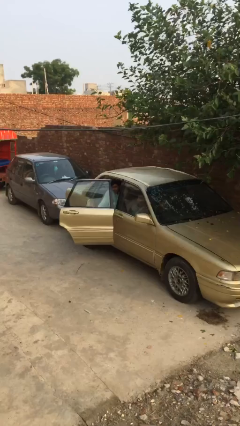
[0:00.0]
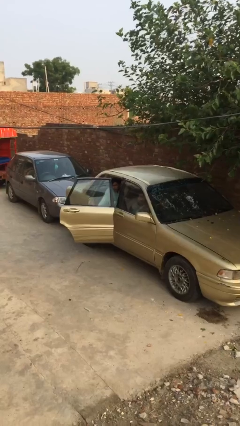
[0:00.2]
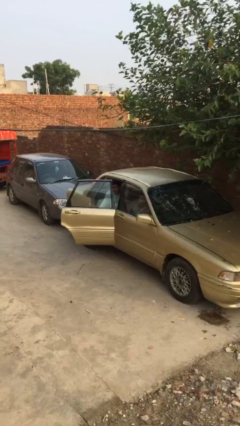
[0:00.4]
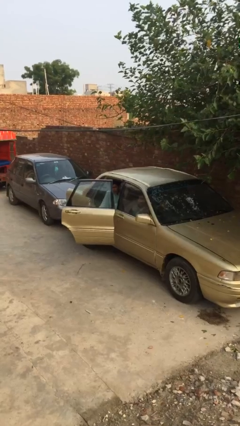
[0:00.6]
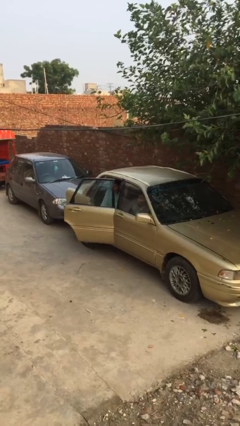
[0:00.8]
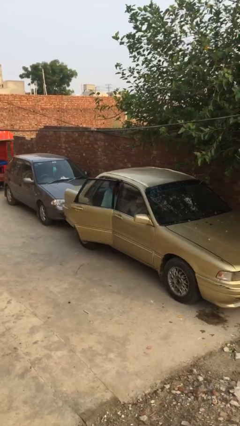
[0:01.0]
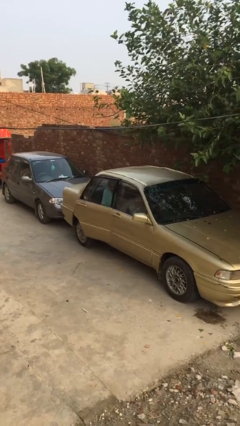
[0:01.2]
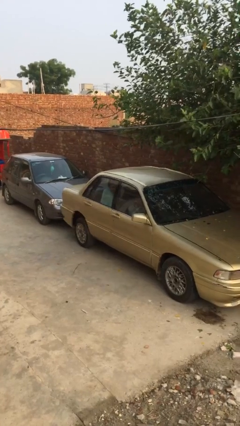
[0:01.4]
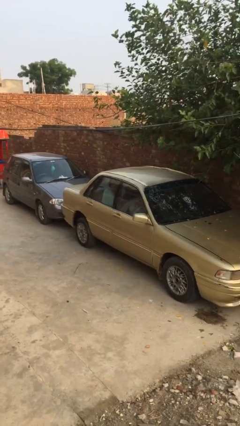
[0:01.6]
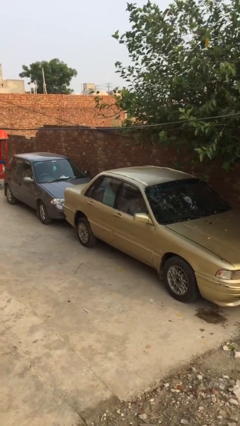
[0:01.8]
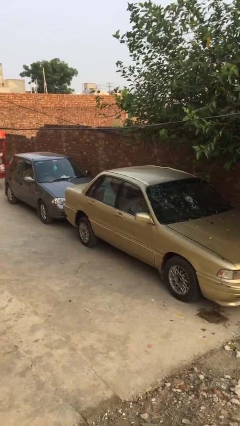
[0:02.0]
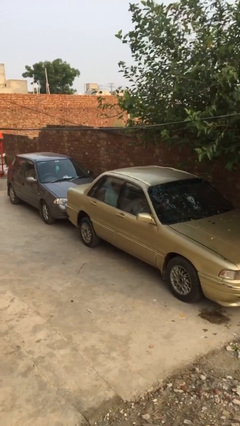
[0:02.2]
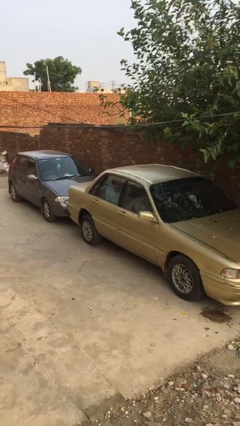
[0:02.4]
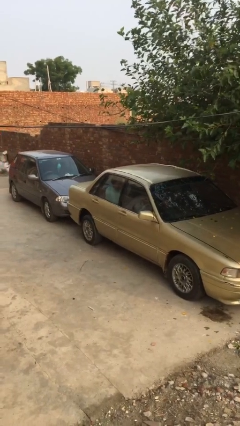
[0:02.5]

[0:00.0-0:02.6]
person closes car door

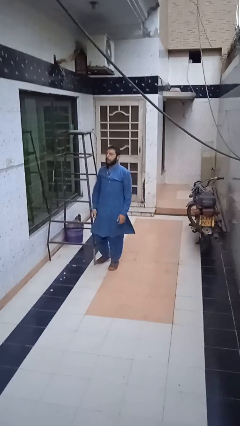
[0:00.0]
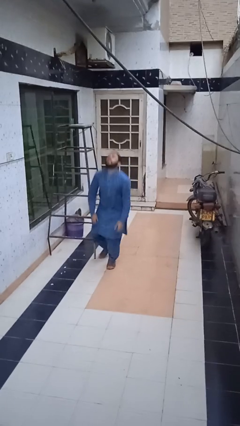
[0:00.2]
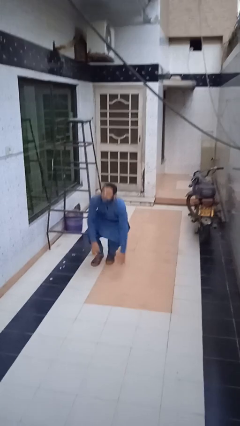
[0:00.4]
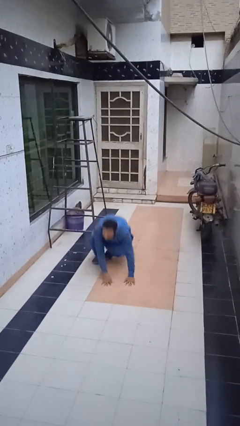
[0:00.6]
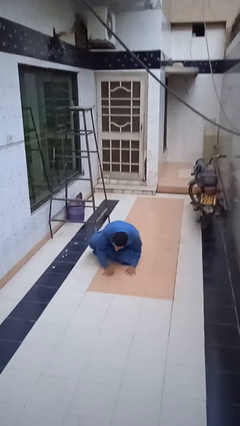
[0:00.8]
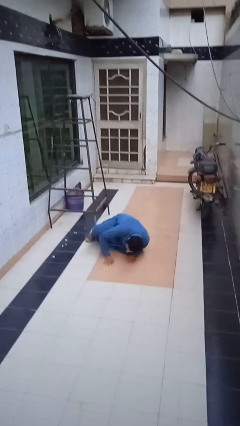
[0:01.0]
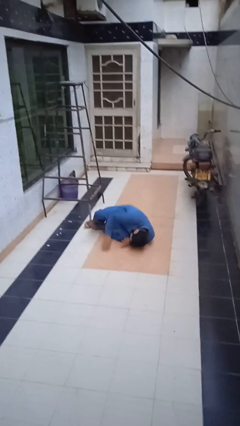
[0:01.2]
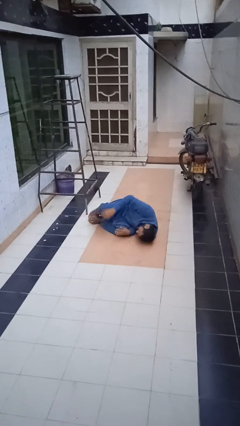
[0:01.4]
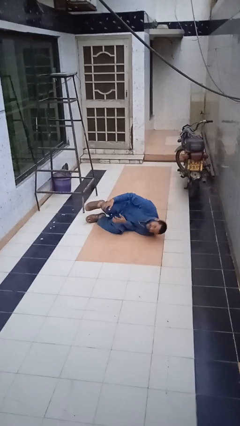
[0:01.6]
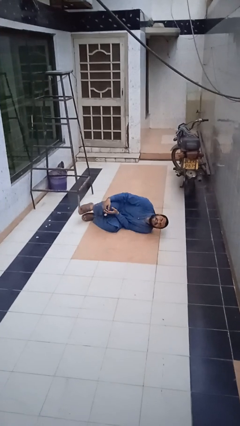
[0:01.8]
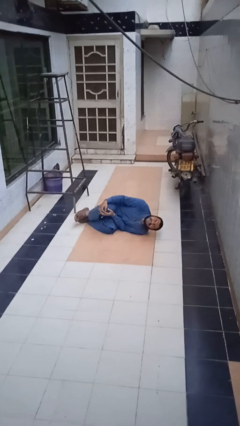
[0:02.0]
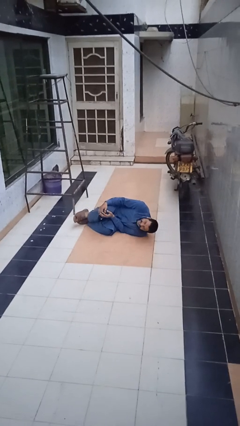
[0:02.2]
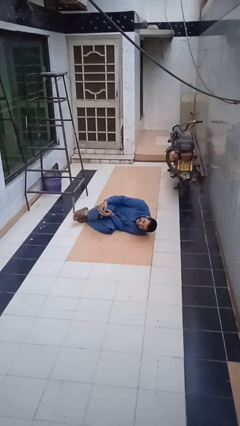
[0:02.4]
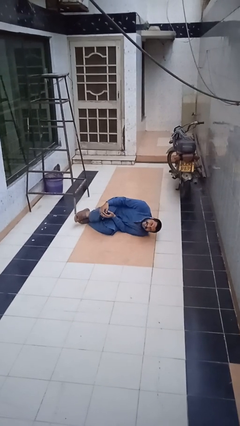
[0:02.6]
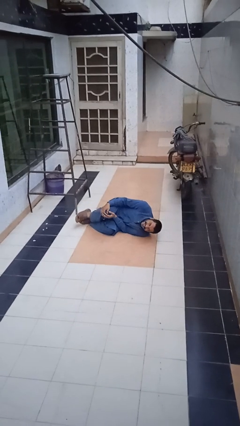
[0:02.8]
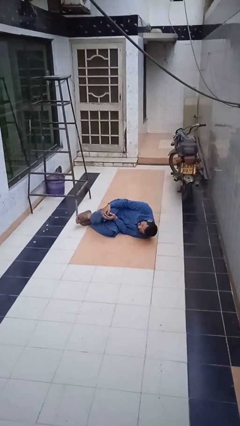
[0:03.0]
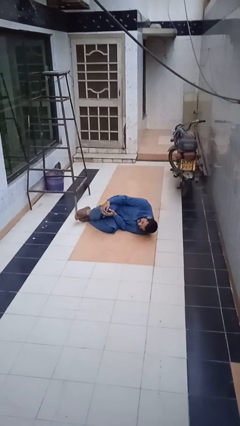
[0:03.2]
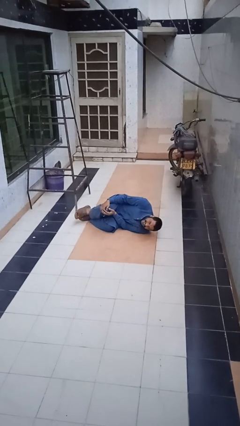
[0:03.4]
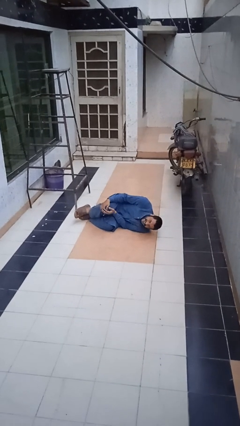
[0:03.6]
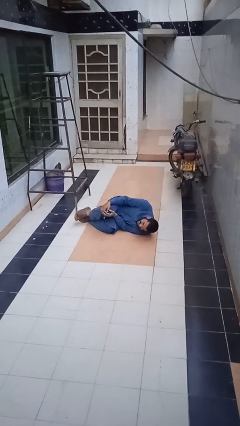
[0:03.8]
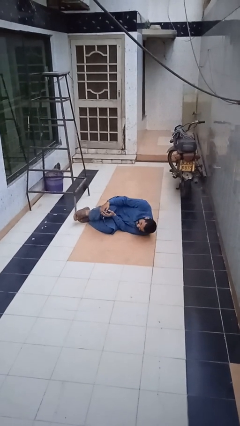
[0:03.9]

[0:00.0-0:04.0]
person lies down on floor

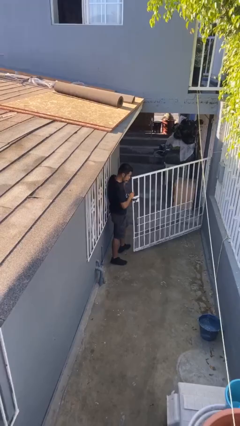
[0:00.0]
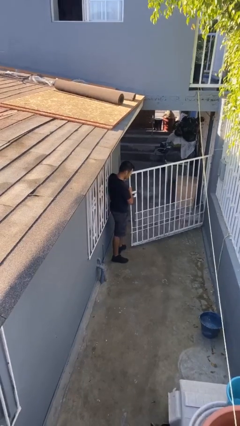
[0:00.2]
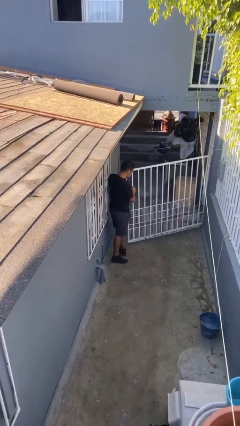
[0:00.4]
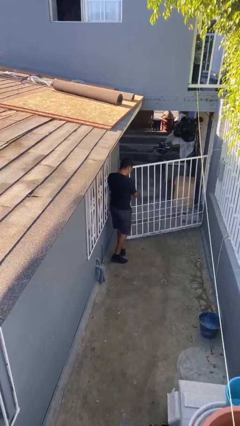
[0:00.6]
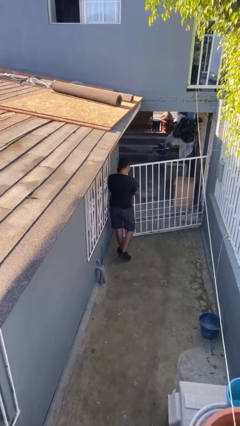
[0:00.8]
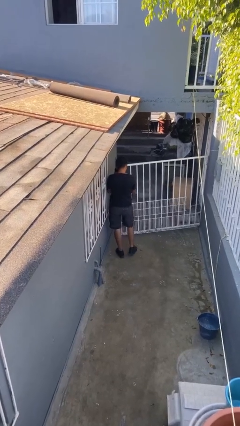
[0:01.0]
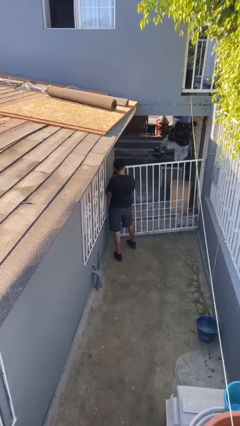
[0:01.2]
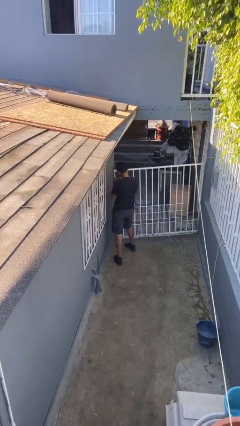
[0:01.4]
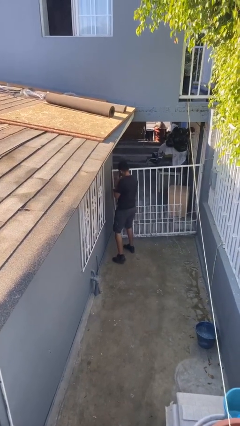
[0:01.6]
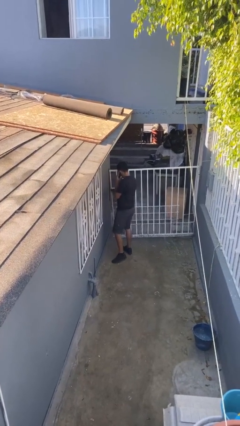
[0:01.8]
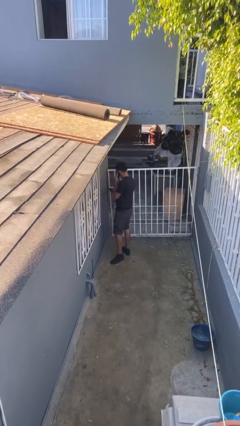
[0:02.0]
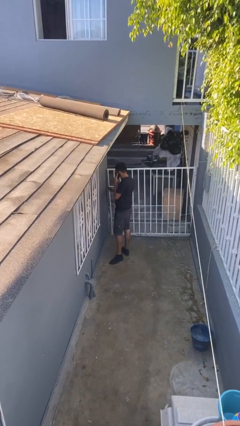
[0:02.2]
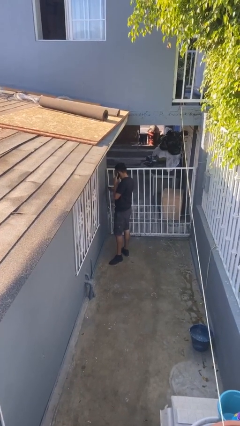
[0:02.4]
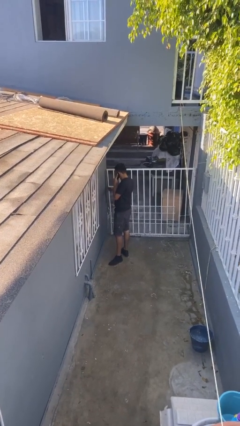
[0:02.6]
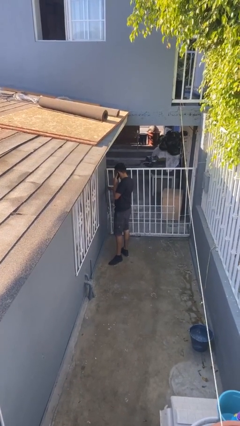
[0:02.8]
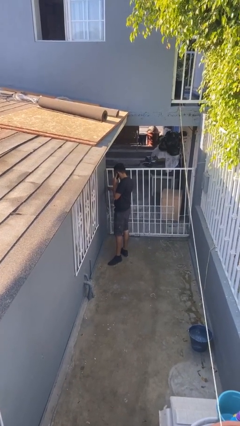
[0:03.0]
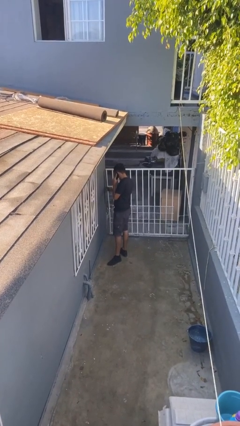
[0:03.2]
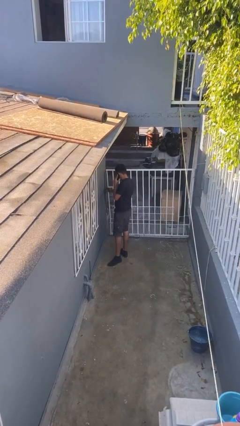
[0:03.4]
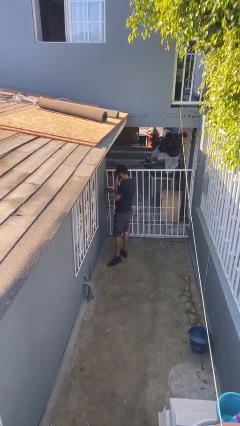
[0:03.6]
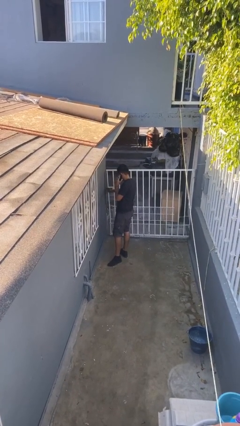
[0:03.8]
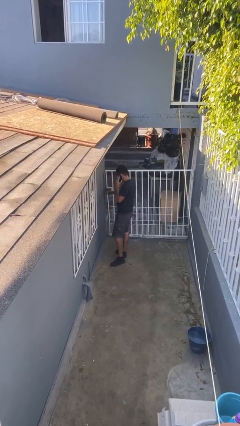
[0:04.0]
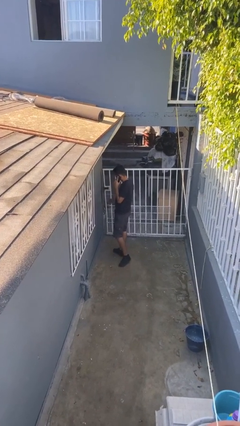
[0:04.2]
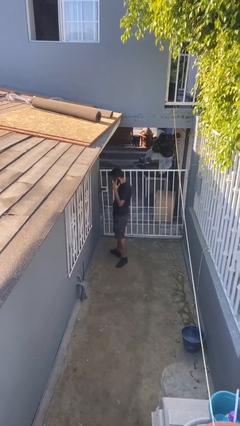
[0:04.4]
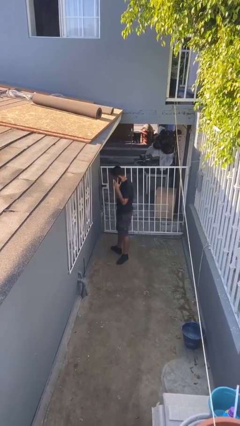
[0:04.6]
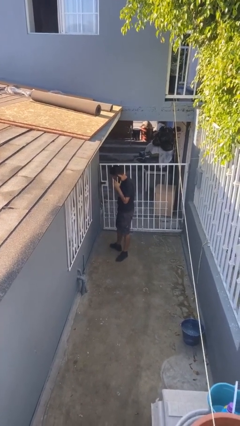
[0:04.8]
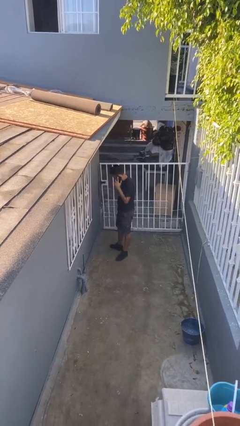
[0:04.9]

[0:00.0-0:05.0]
person closes facility door

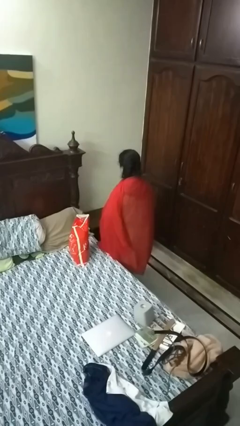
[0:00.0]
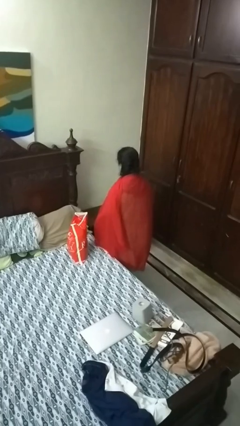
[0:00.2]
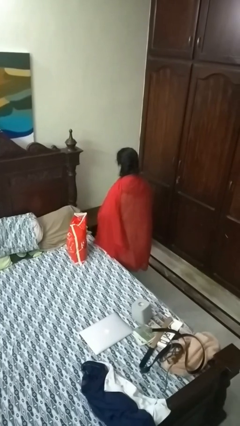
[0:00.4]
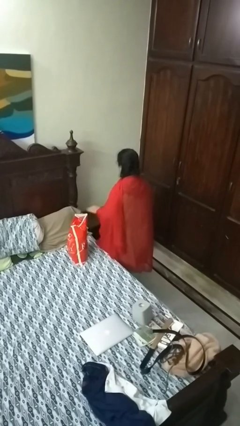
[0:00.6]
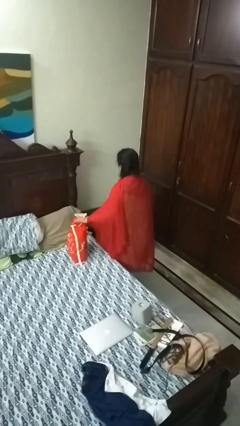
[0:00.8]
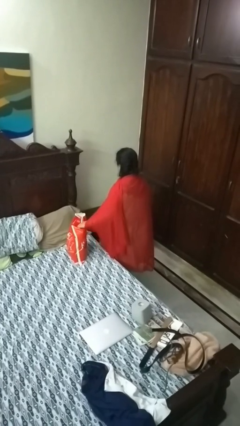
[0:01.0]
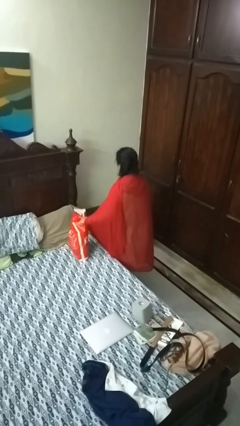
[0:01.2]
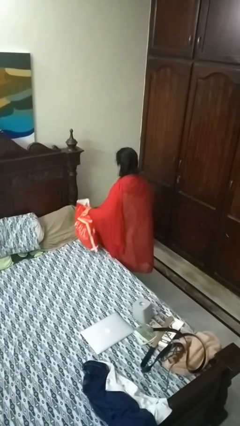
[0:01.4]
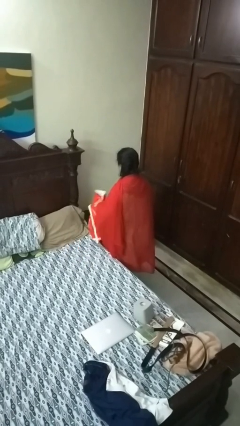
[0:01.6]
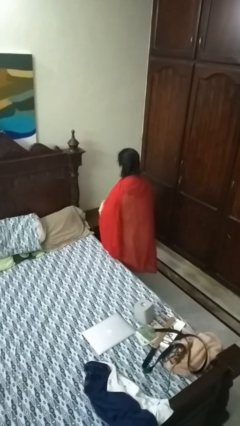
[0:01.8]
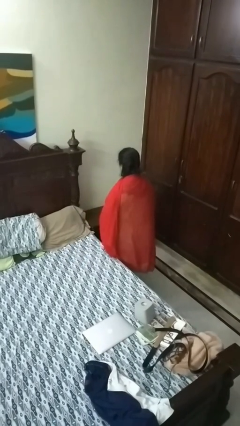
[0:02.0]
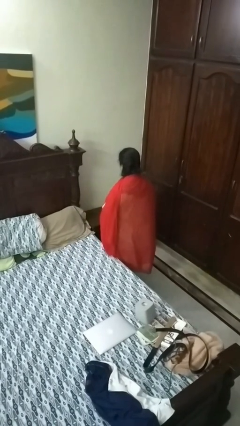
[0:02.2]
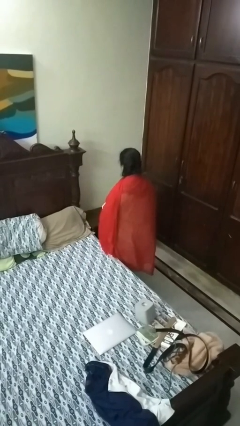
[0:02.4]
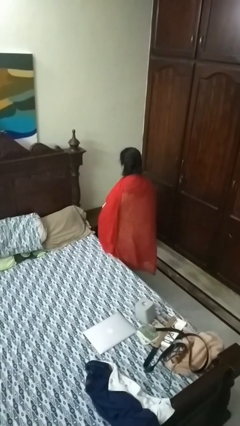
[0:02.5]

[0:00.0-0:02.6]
person picks up object from bed

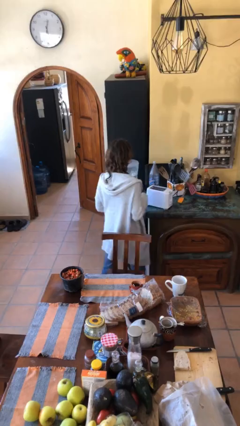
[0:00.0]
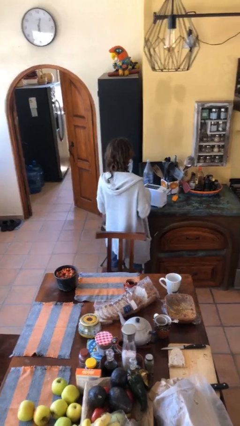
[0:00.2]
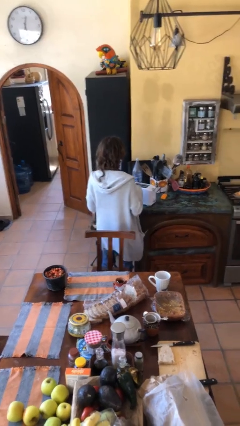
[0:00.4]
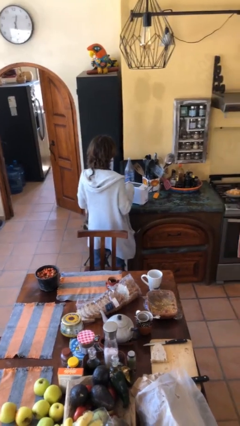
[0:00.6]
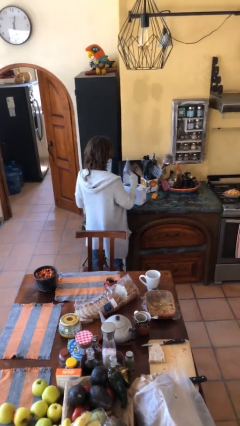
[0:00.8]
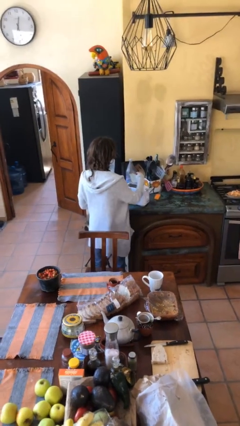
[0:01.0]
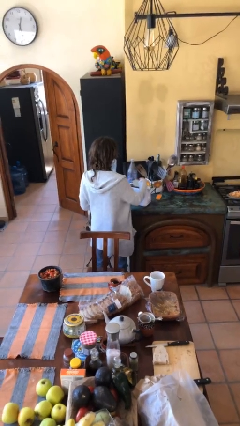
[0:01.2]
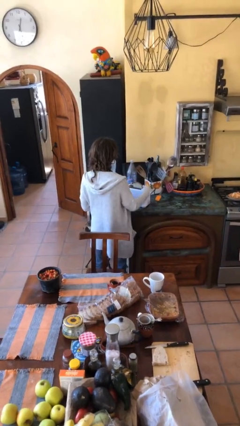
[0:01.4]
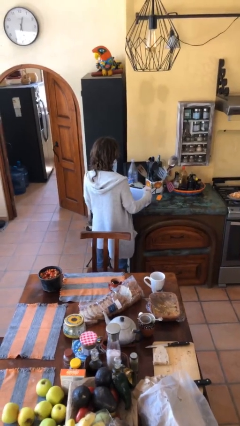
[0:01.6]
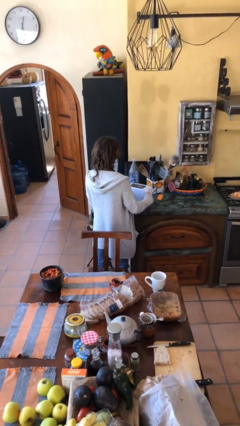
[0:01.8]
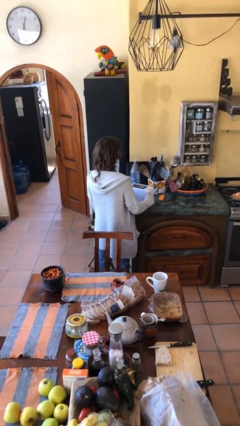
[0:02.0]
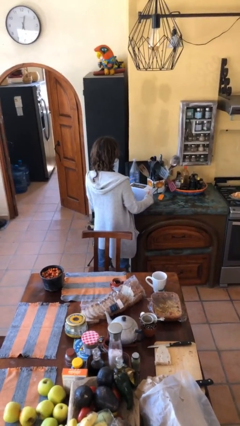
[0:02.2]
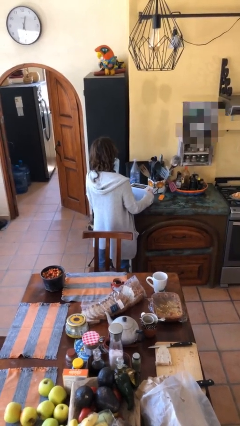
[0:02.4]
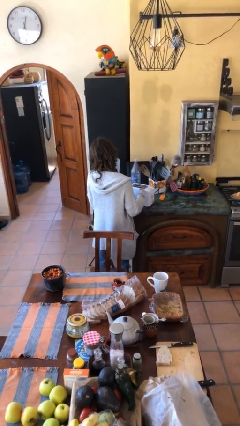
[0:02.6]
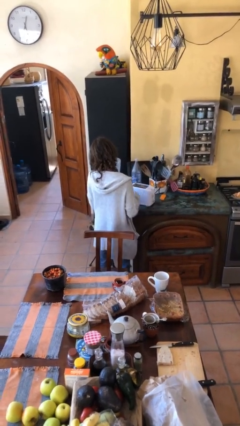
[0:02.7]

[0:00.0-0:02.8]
person puts object into toaster

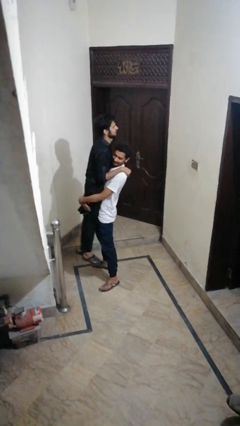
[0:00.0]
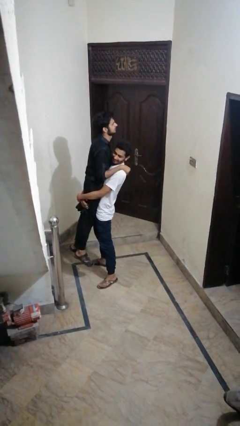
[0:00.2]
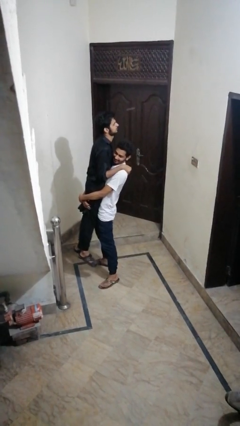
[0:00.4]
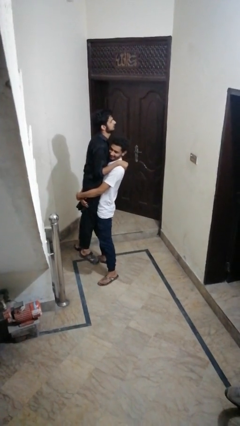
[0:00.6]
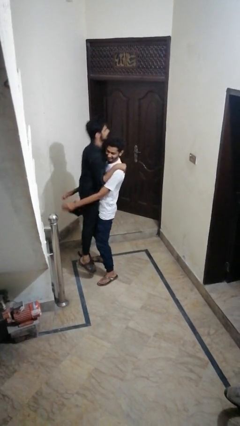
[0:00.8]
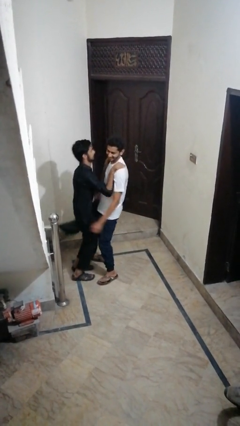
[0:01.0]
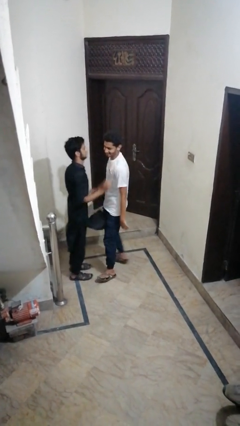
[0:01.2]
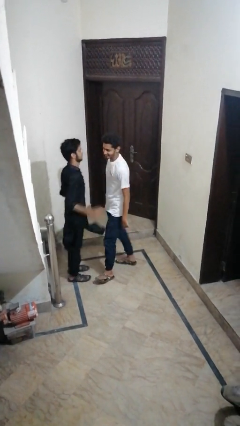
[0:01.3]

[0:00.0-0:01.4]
person takes off facemask
